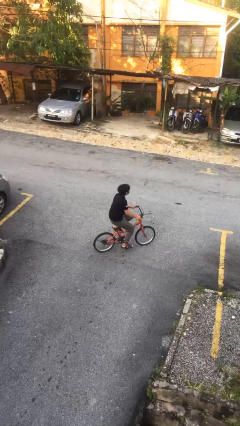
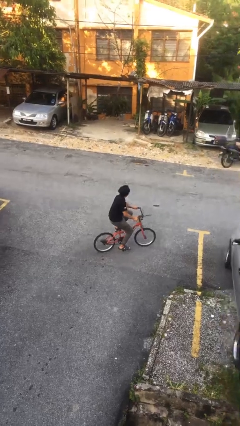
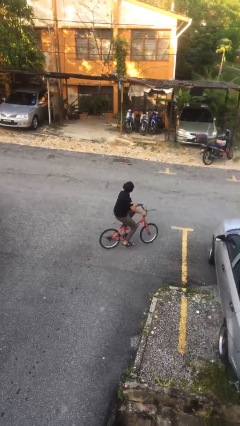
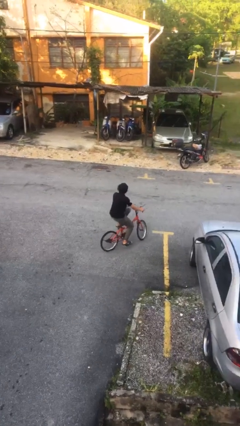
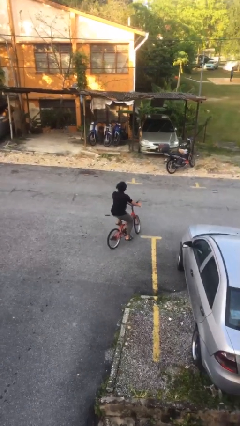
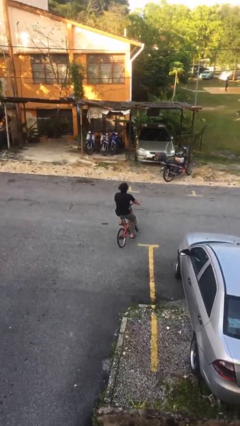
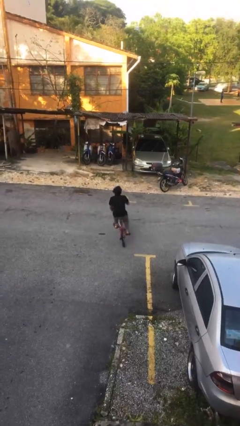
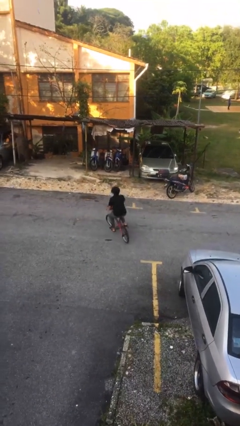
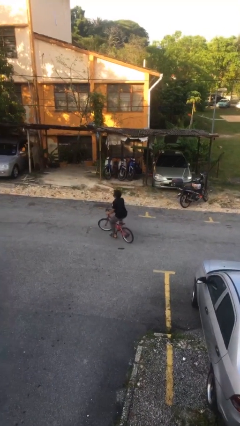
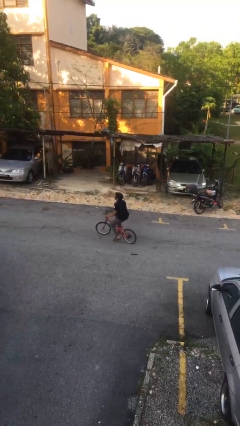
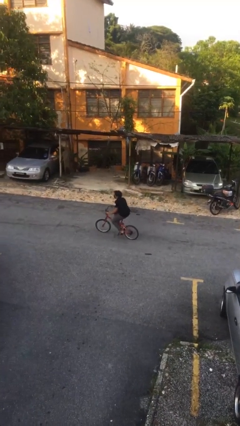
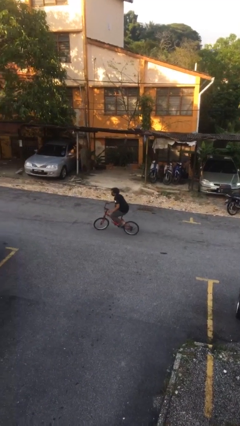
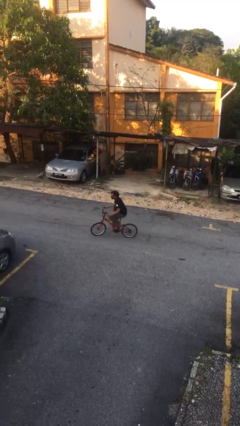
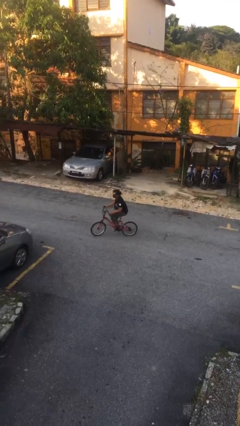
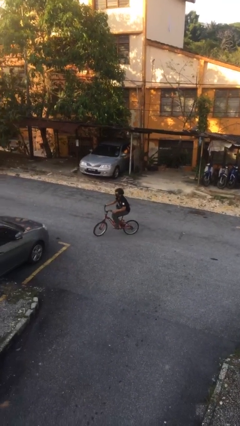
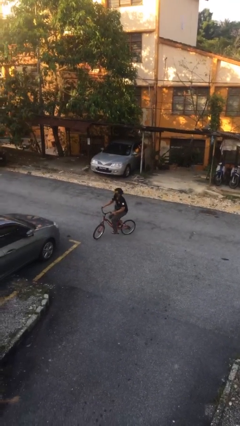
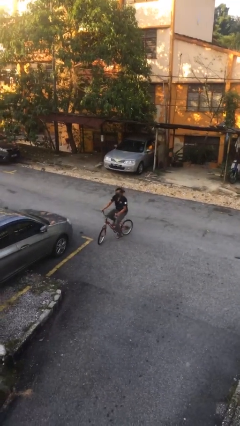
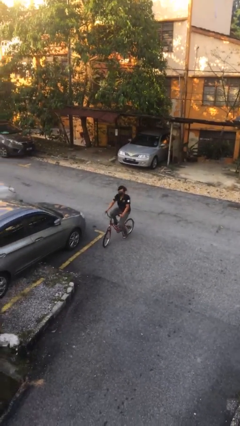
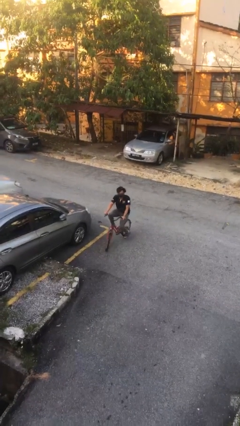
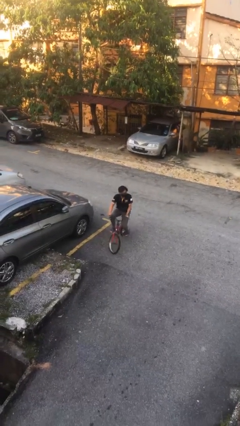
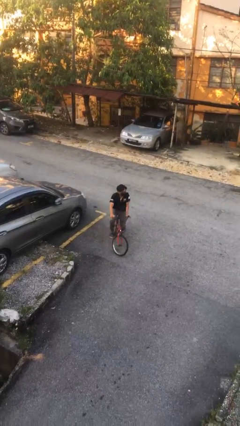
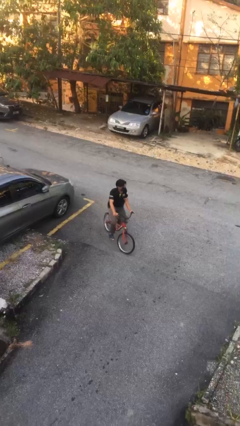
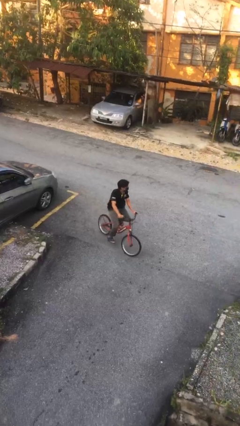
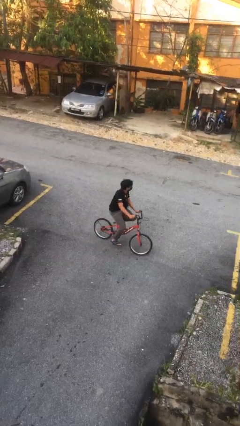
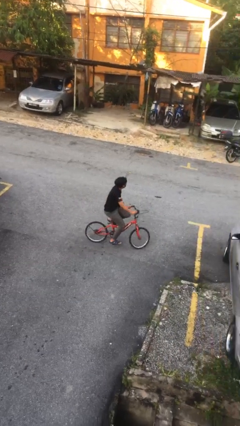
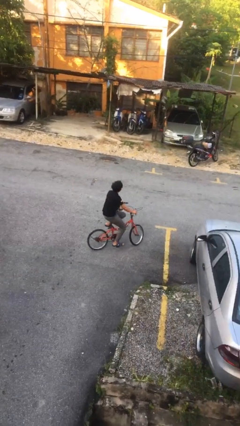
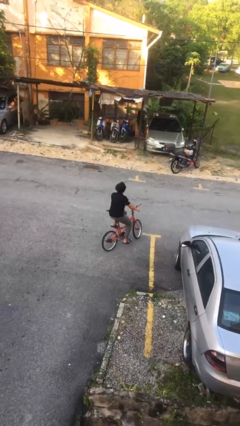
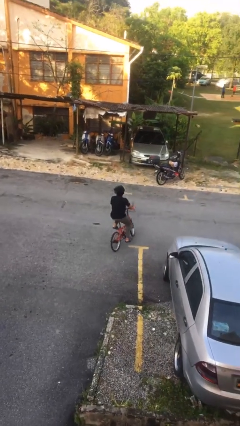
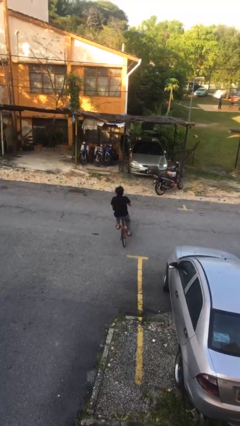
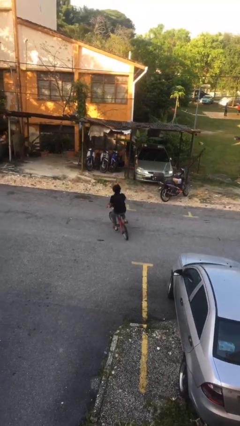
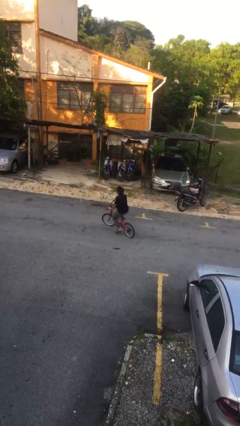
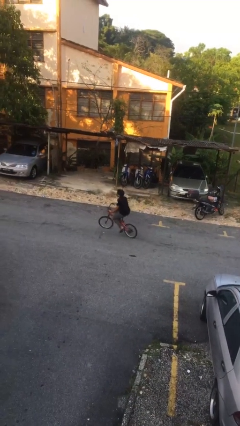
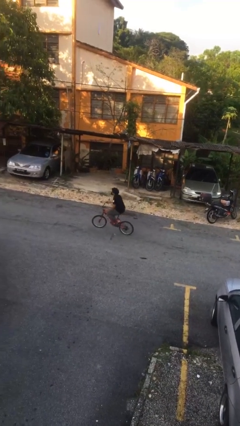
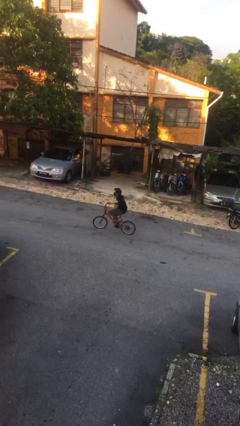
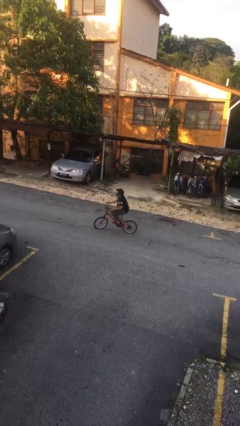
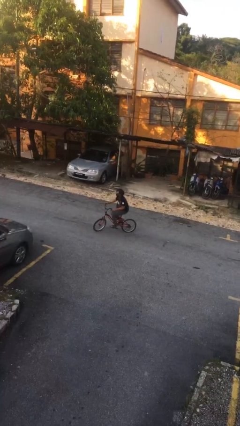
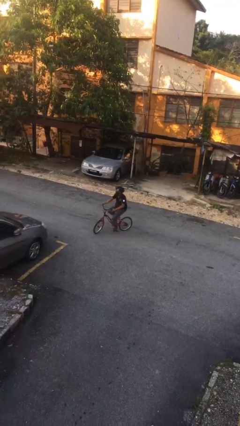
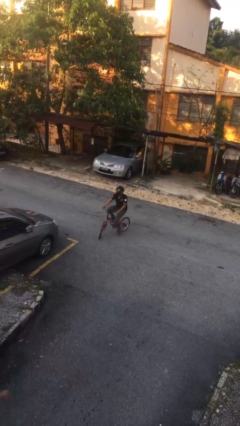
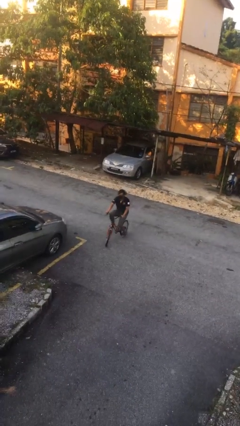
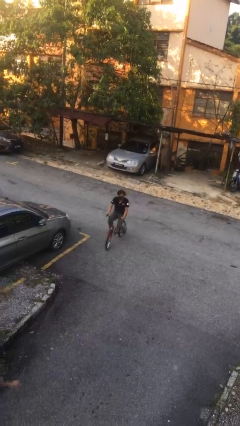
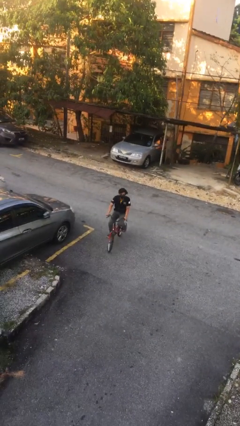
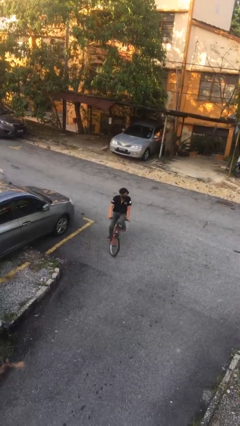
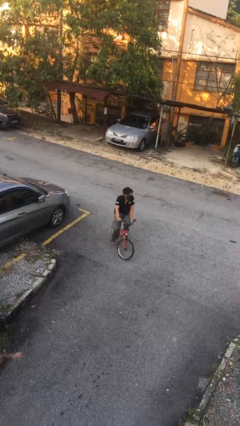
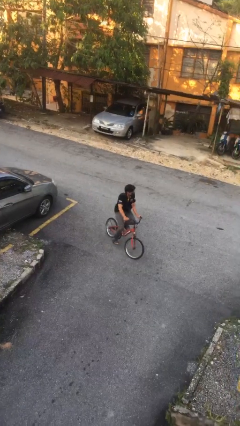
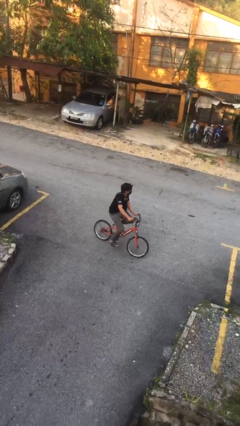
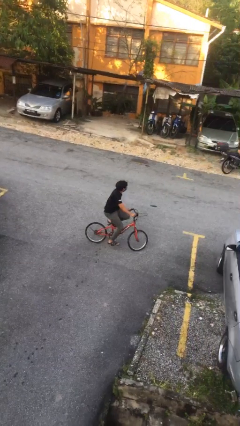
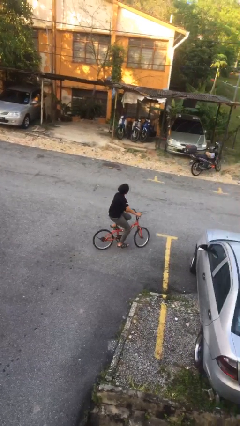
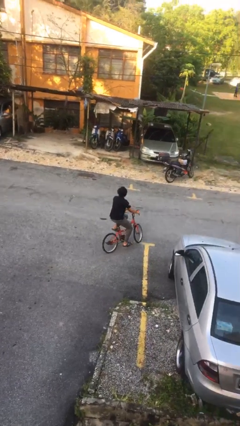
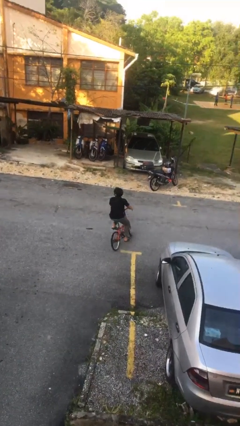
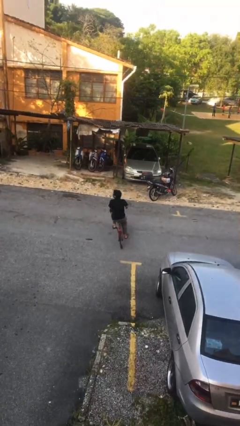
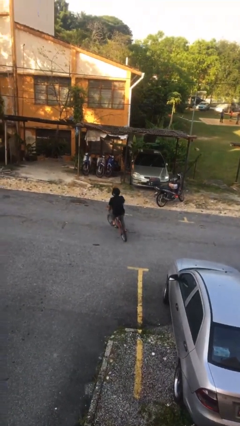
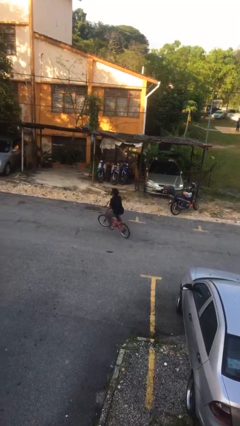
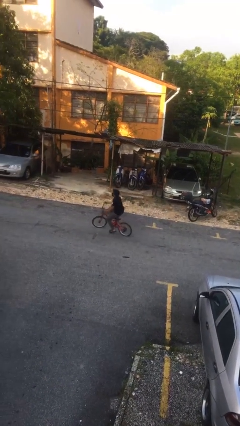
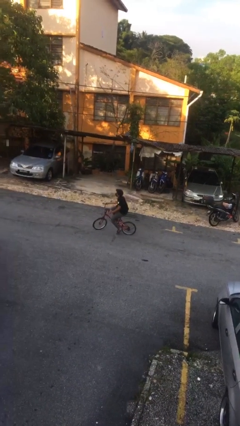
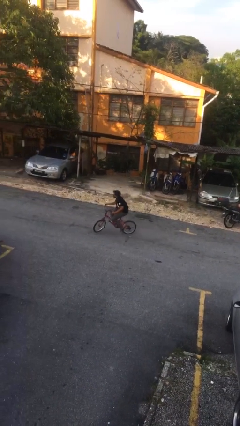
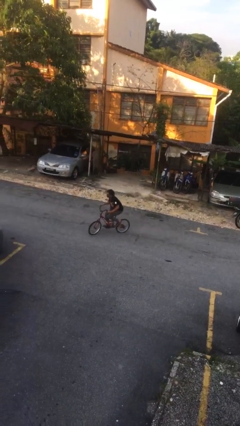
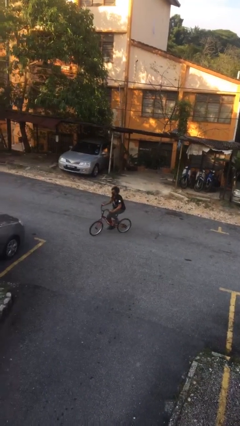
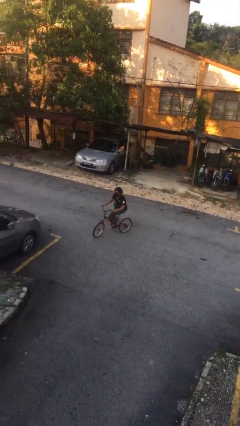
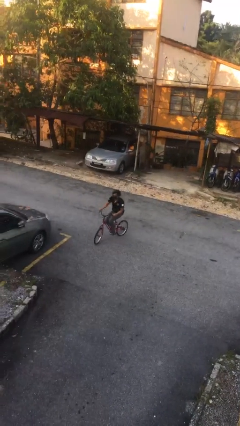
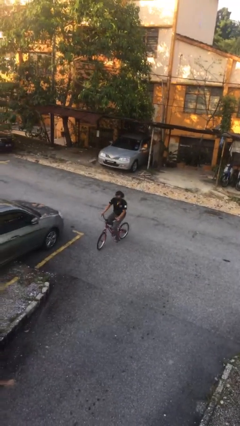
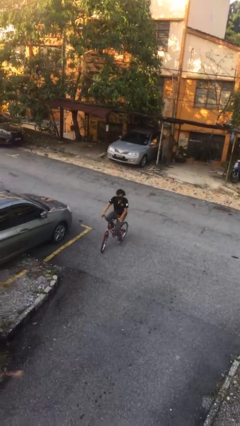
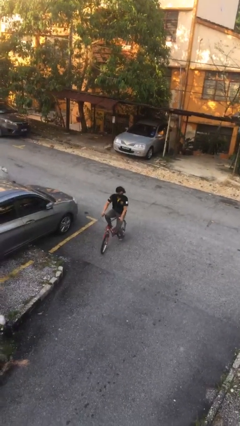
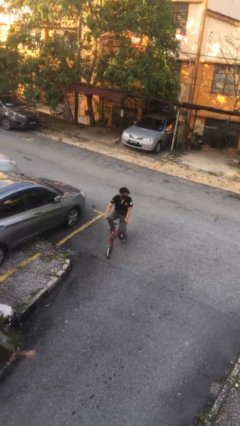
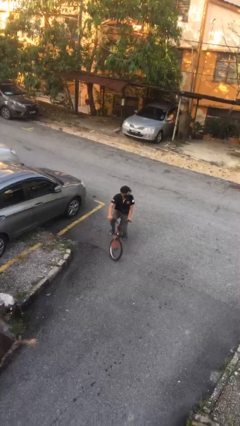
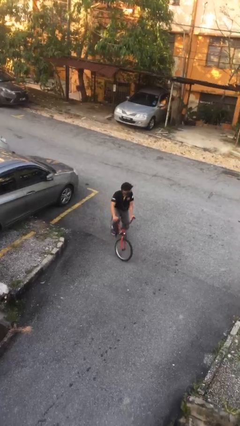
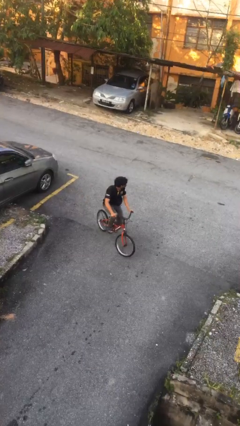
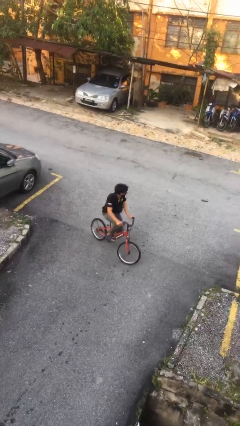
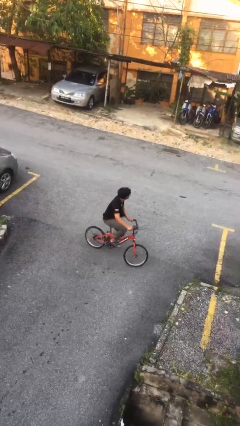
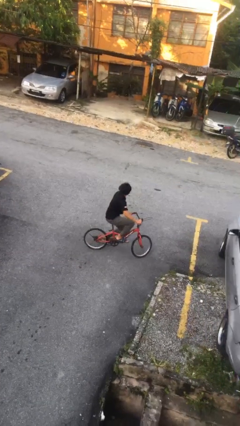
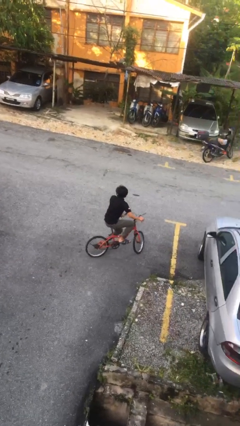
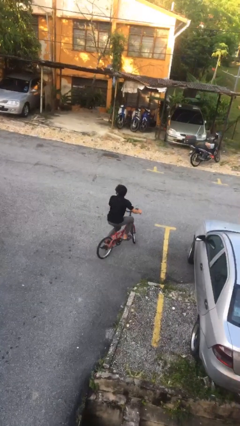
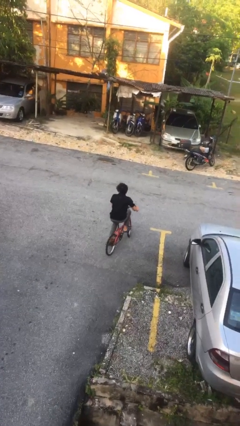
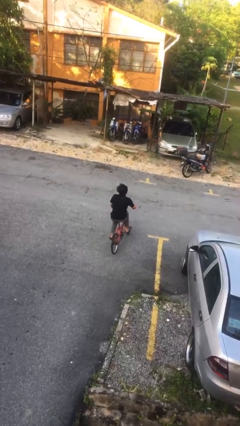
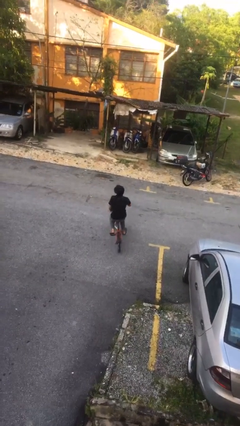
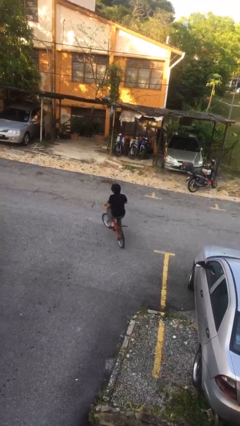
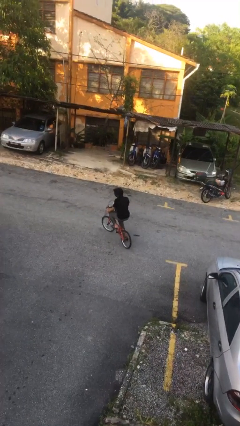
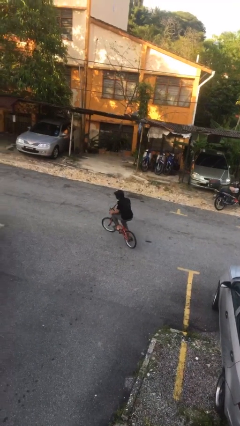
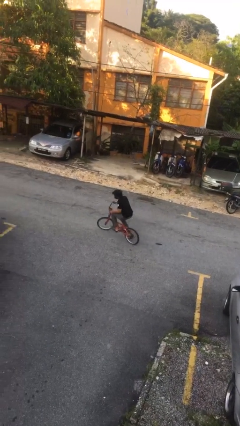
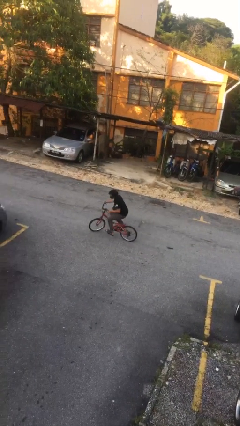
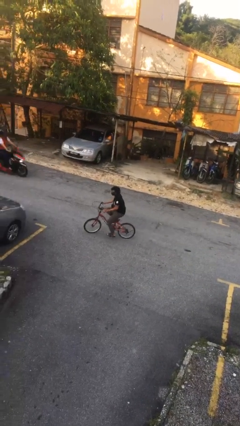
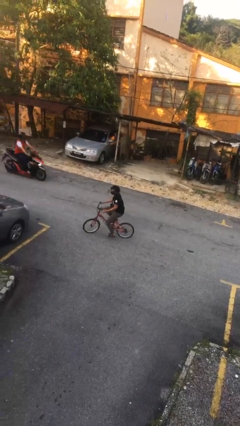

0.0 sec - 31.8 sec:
person rides bicycle

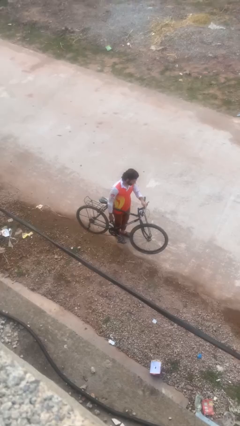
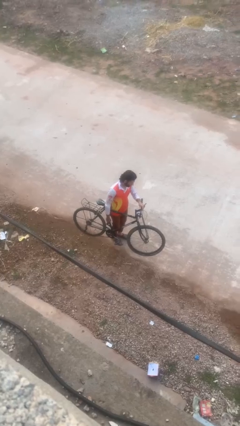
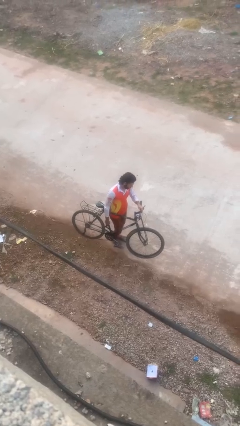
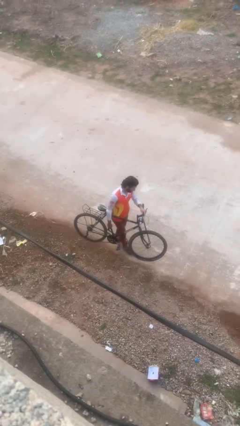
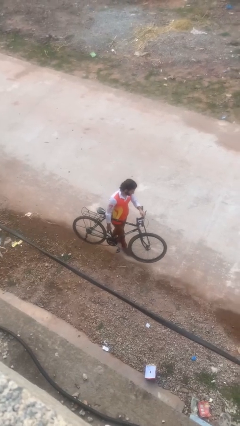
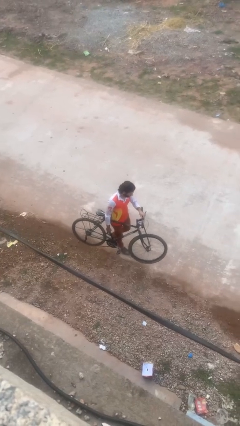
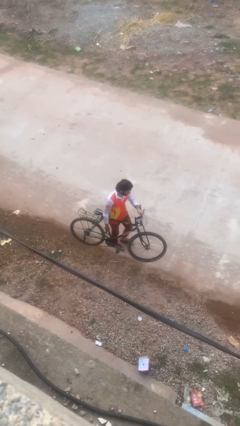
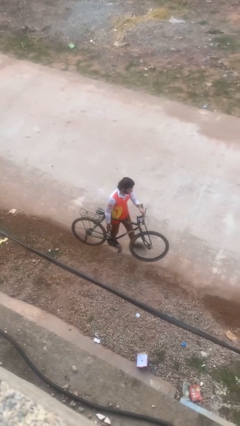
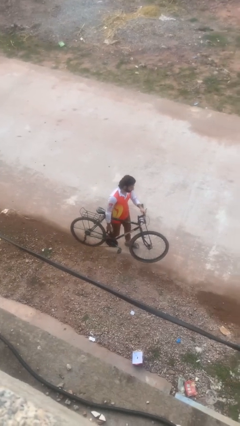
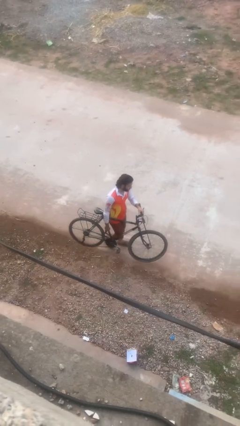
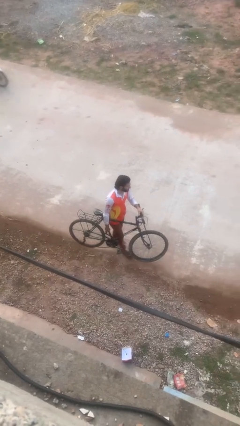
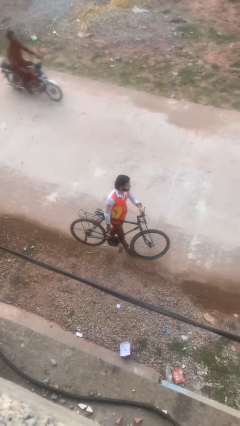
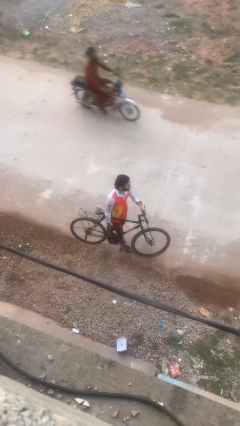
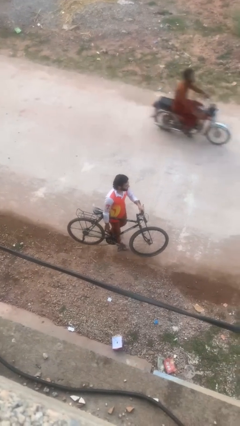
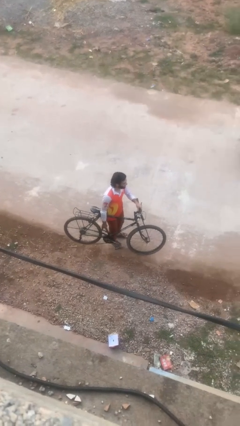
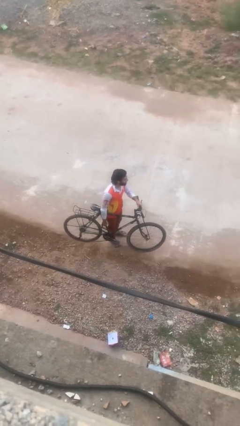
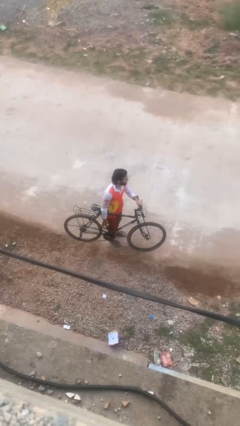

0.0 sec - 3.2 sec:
person carries bicycle
